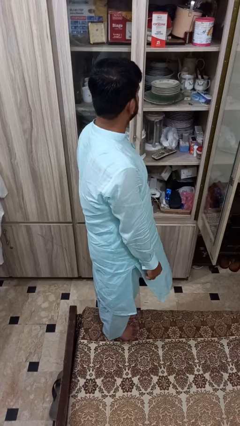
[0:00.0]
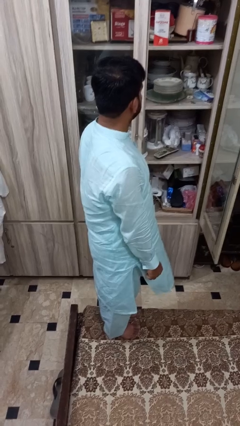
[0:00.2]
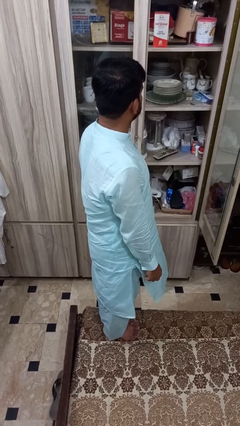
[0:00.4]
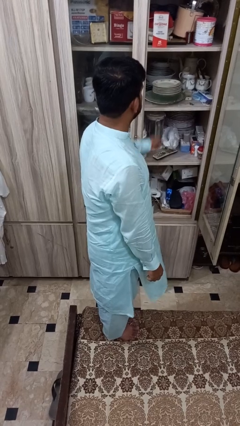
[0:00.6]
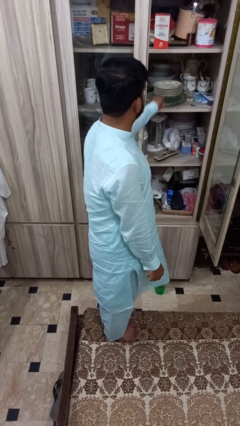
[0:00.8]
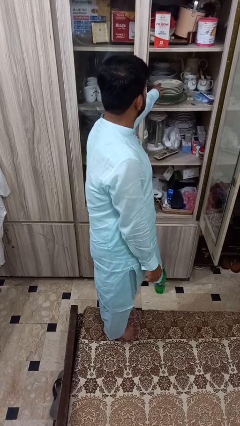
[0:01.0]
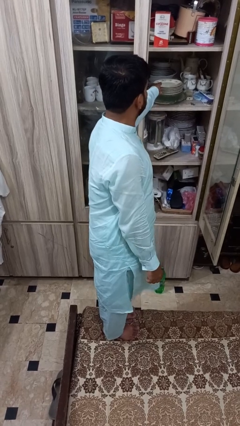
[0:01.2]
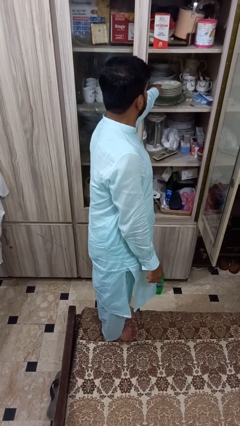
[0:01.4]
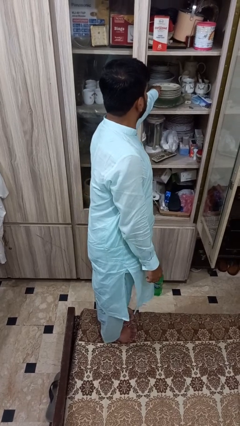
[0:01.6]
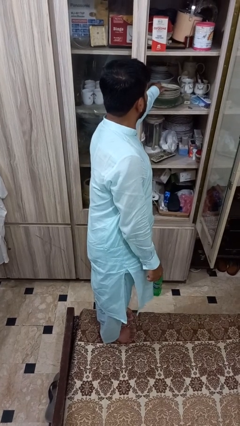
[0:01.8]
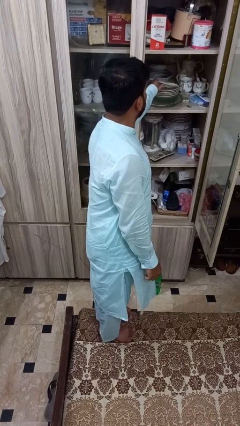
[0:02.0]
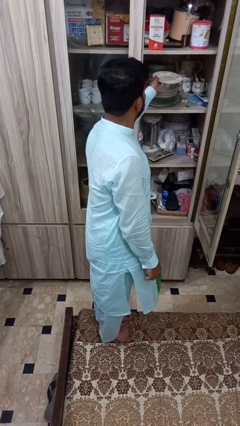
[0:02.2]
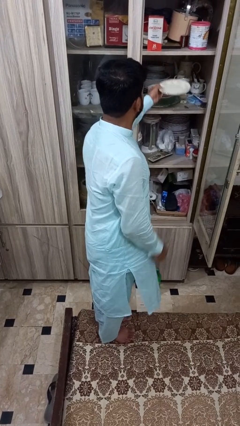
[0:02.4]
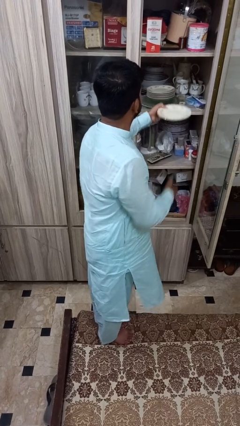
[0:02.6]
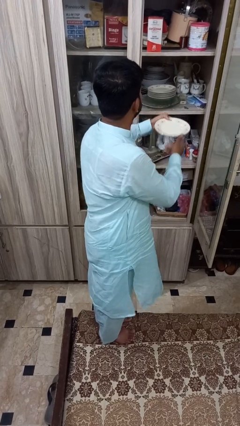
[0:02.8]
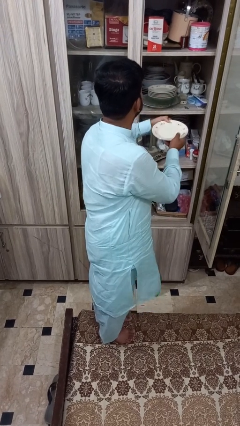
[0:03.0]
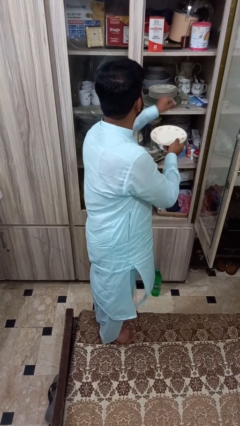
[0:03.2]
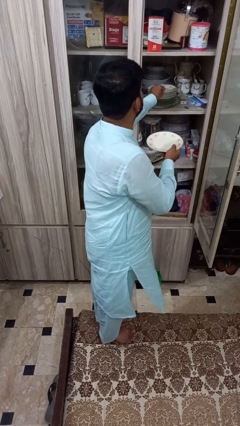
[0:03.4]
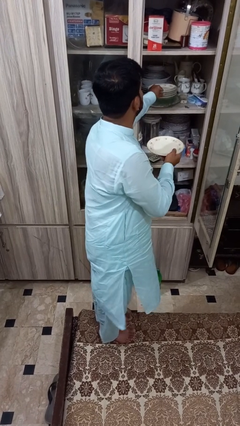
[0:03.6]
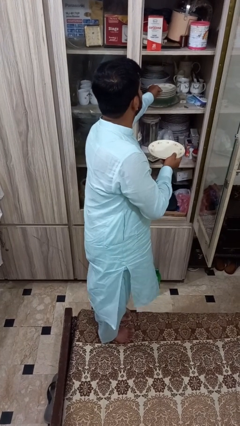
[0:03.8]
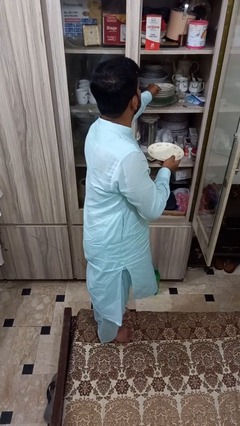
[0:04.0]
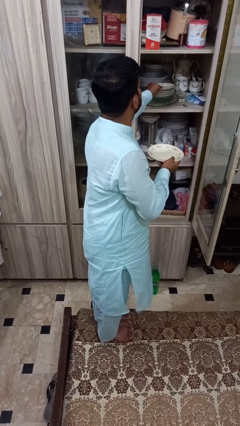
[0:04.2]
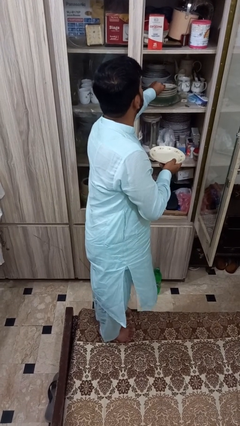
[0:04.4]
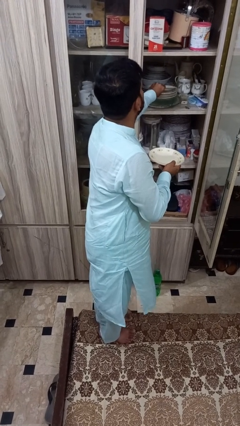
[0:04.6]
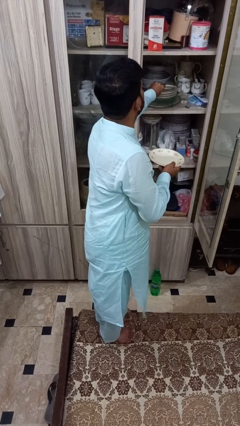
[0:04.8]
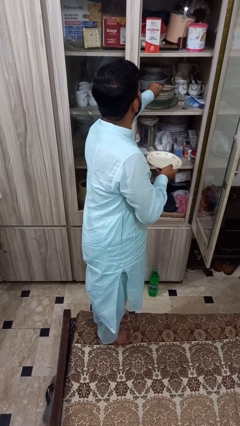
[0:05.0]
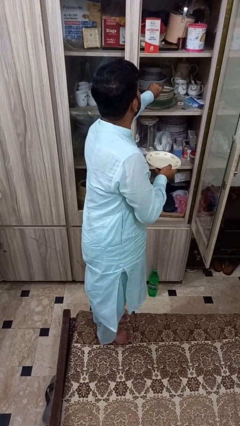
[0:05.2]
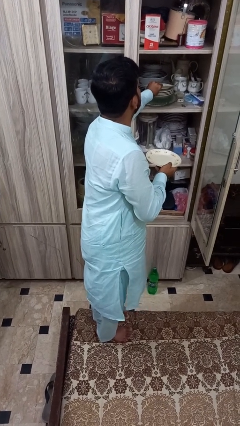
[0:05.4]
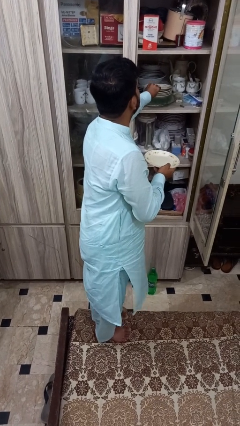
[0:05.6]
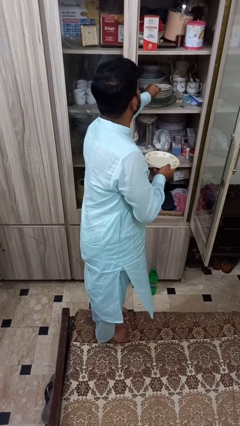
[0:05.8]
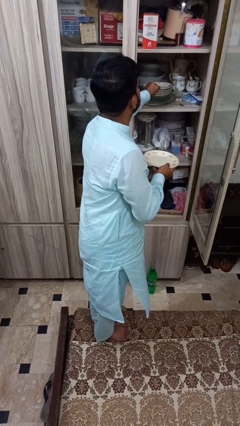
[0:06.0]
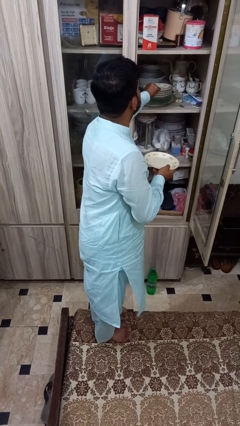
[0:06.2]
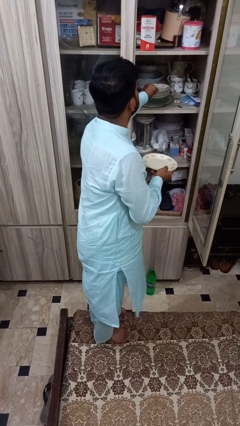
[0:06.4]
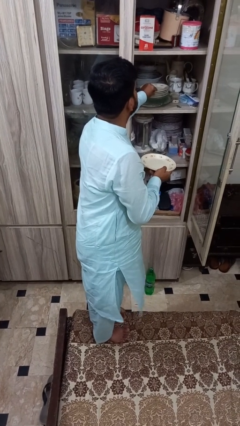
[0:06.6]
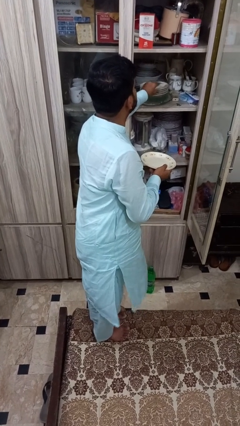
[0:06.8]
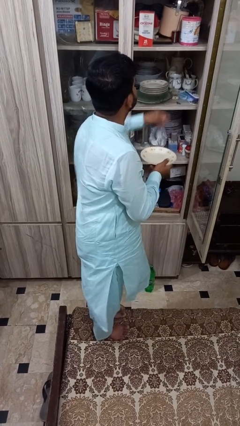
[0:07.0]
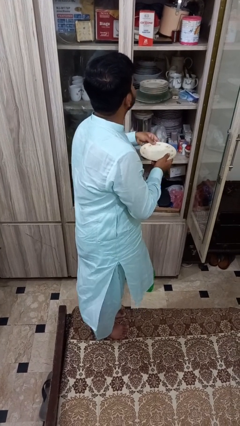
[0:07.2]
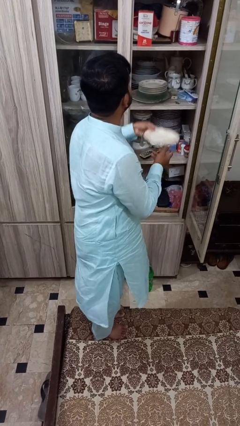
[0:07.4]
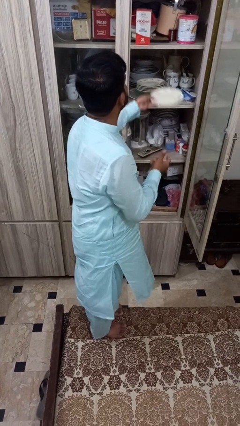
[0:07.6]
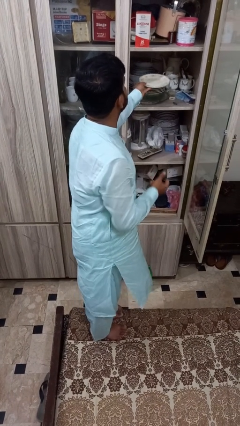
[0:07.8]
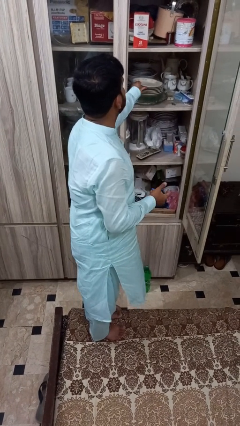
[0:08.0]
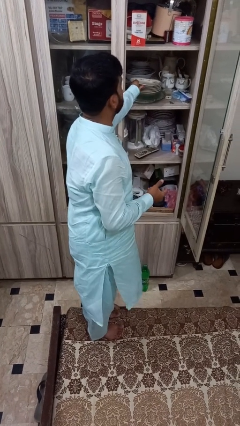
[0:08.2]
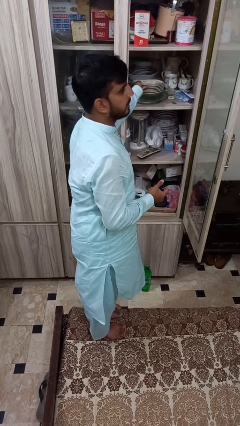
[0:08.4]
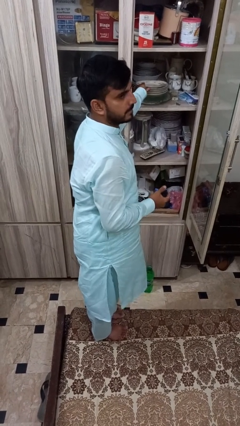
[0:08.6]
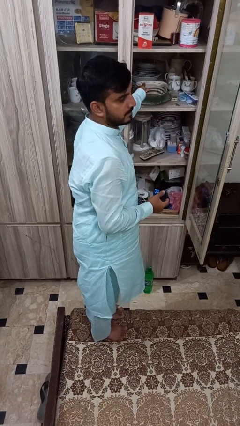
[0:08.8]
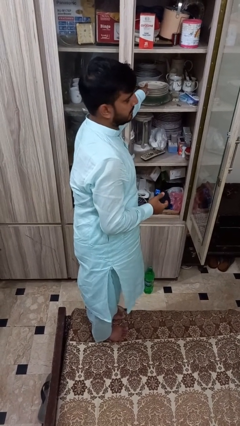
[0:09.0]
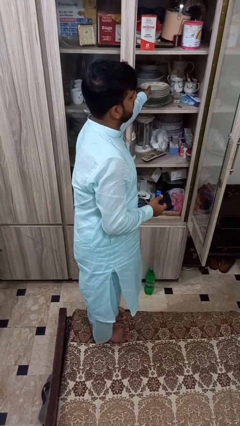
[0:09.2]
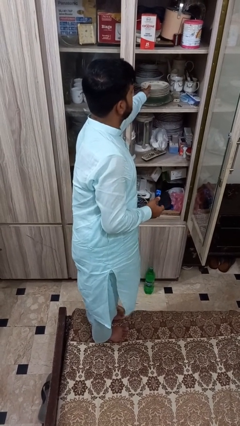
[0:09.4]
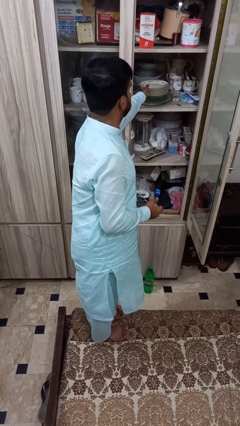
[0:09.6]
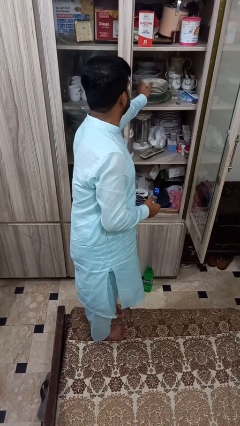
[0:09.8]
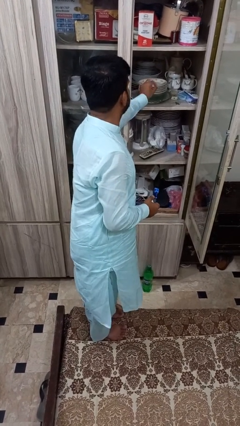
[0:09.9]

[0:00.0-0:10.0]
person loads groceries into cabinet

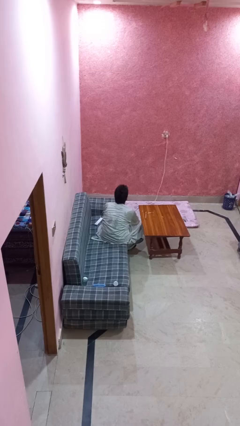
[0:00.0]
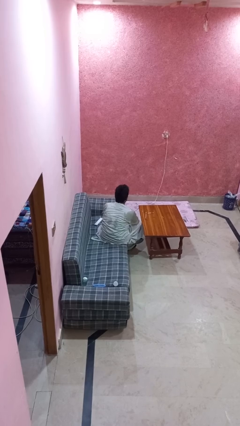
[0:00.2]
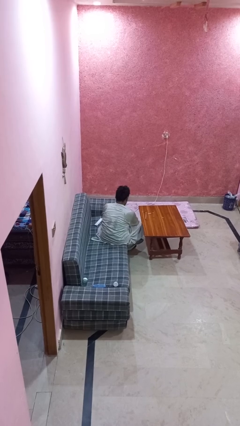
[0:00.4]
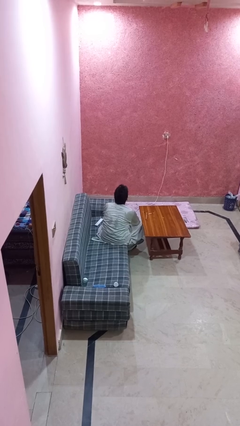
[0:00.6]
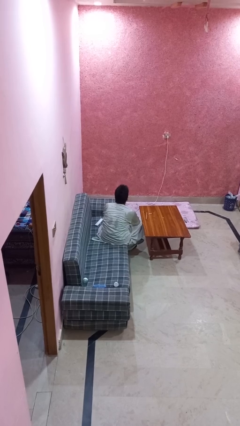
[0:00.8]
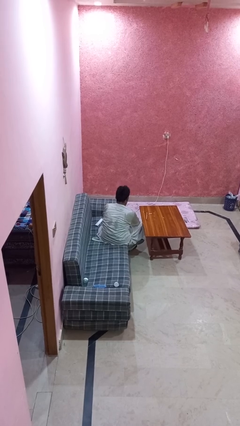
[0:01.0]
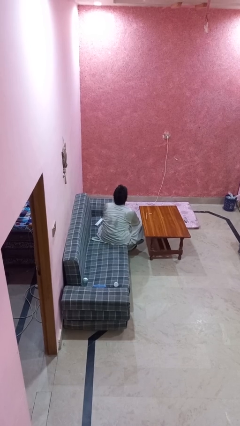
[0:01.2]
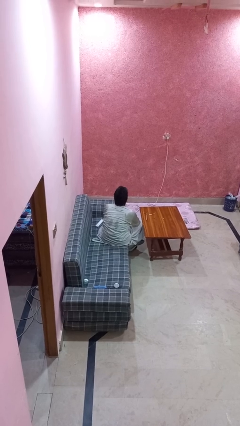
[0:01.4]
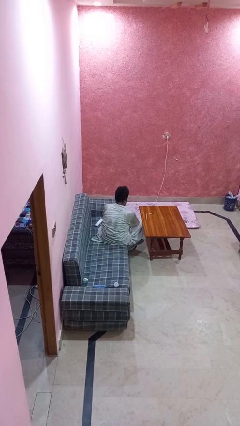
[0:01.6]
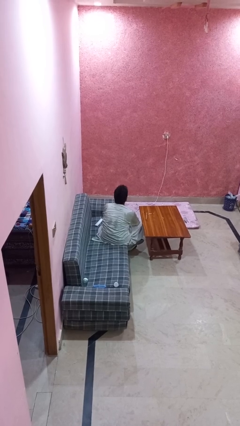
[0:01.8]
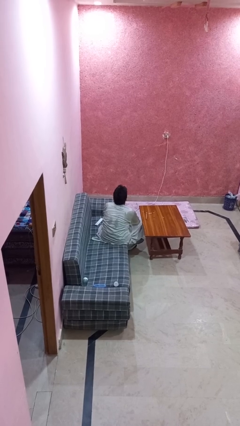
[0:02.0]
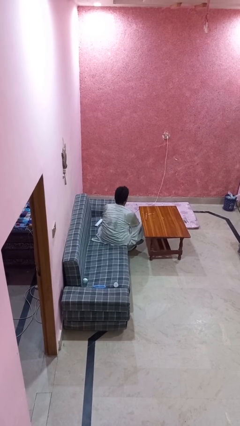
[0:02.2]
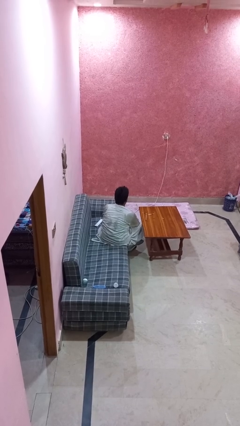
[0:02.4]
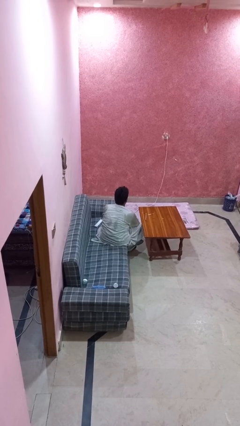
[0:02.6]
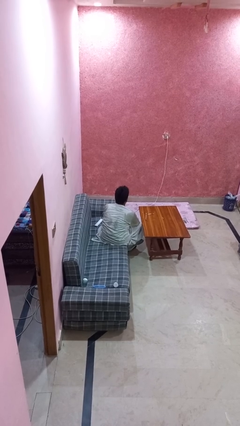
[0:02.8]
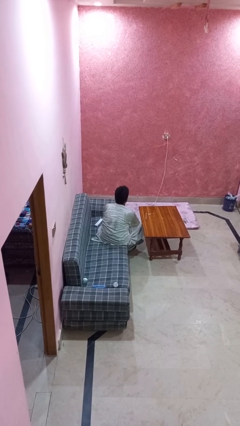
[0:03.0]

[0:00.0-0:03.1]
person nods head

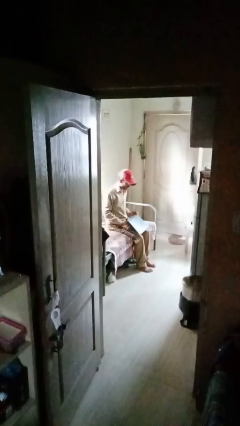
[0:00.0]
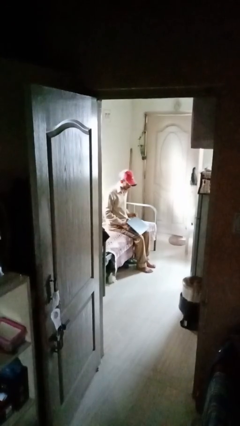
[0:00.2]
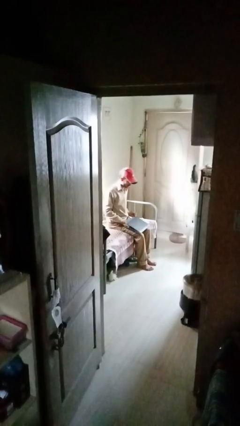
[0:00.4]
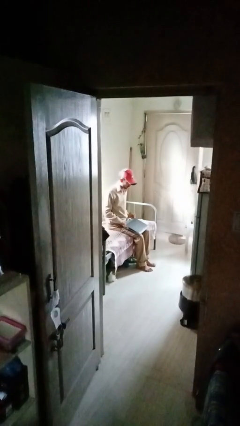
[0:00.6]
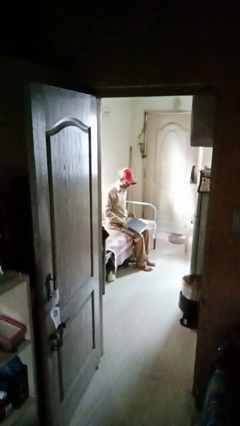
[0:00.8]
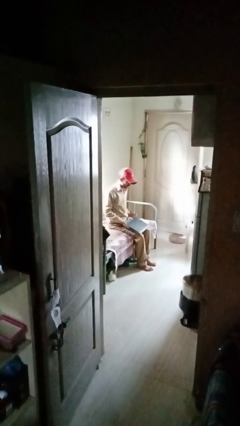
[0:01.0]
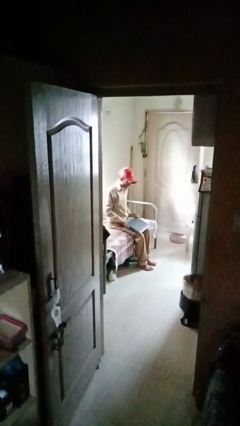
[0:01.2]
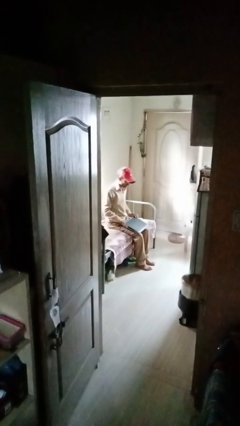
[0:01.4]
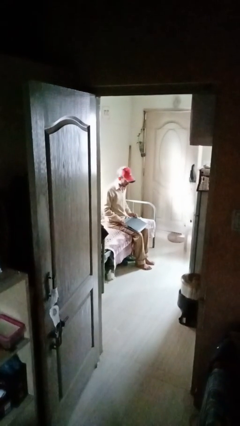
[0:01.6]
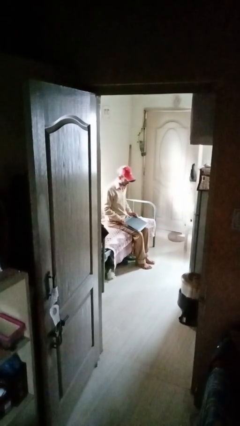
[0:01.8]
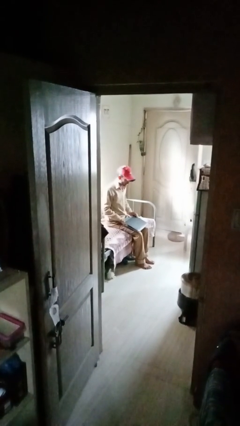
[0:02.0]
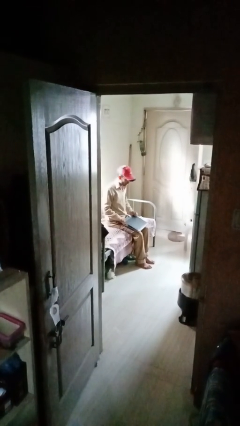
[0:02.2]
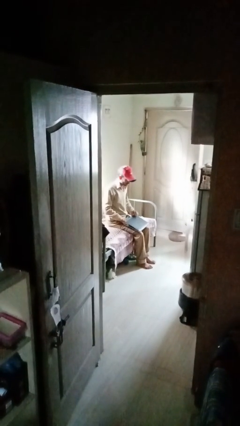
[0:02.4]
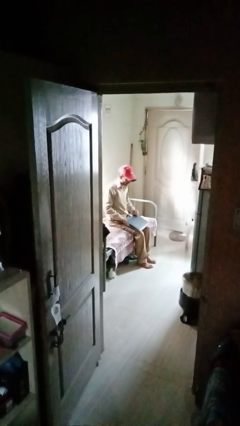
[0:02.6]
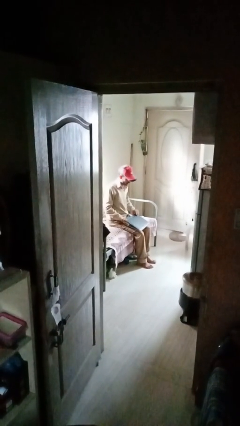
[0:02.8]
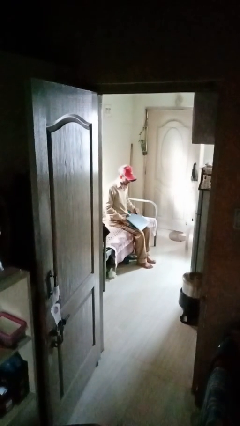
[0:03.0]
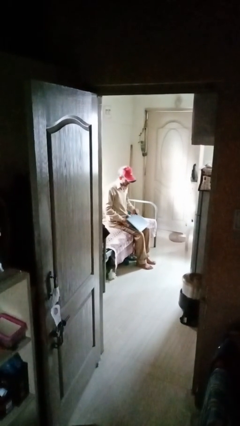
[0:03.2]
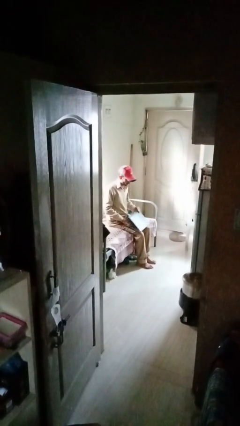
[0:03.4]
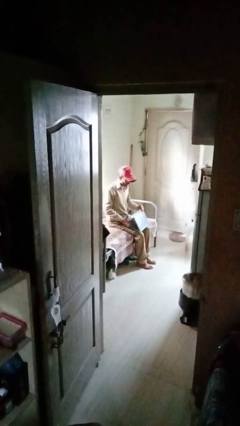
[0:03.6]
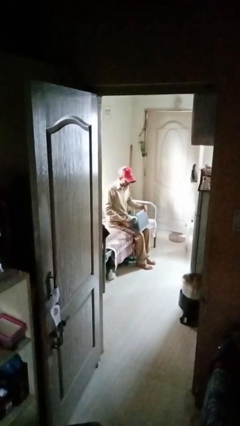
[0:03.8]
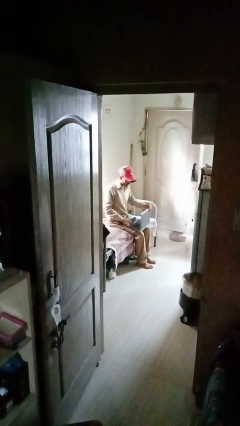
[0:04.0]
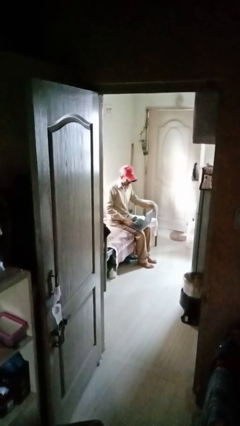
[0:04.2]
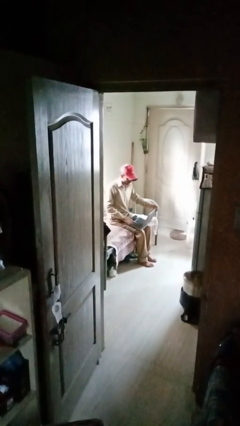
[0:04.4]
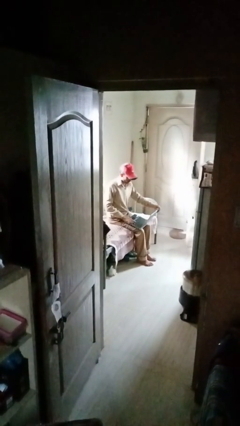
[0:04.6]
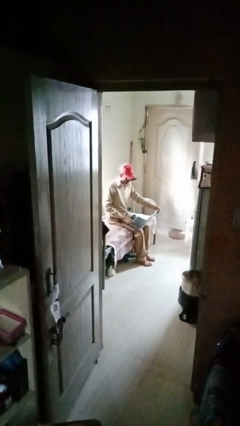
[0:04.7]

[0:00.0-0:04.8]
person closes laptop
